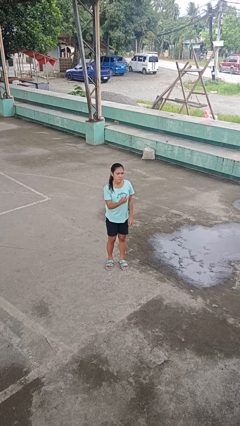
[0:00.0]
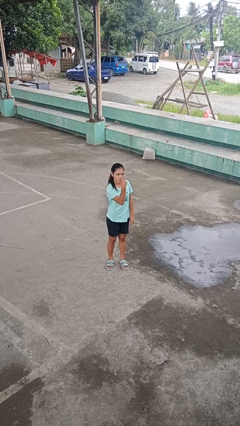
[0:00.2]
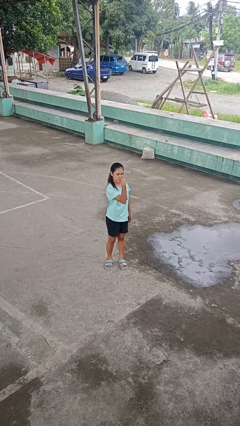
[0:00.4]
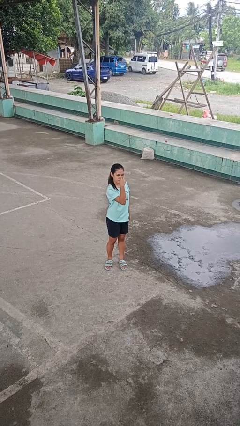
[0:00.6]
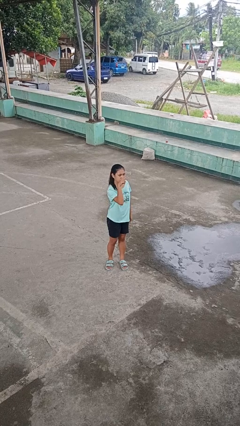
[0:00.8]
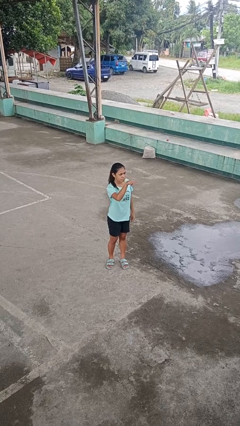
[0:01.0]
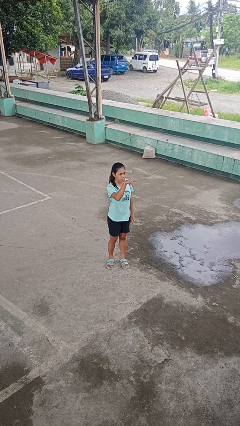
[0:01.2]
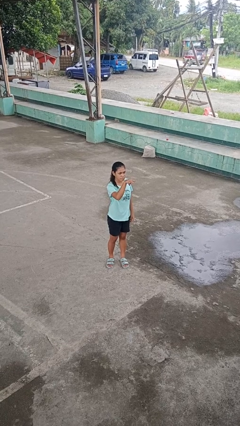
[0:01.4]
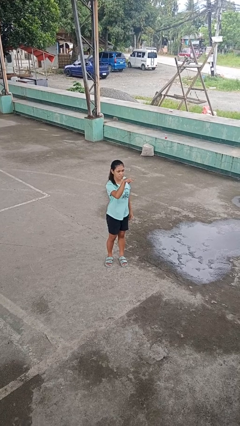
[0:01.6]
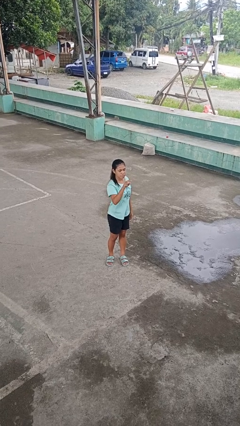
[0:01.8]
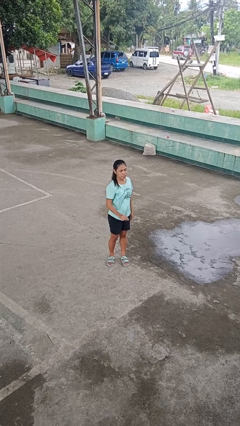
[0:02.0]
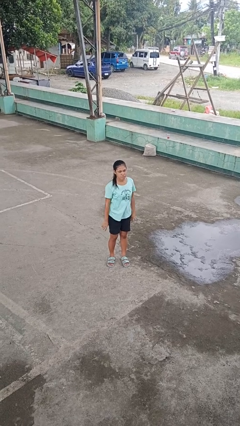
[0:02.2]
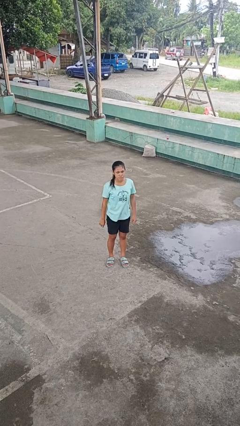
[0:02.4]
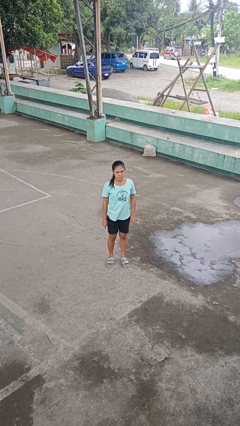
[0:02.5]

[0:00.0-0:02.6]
person gestures watch closely

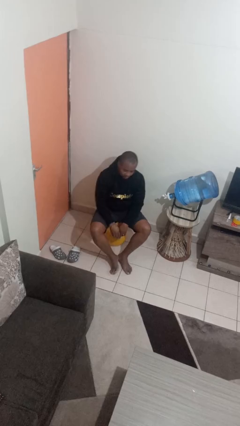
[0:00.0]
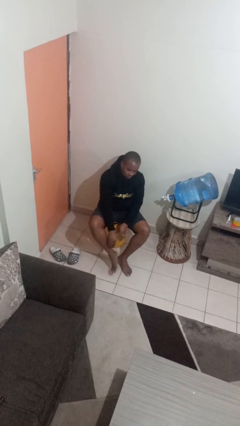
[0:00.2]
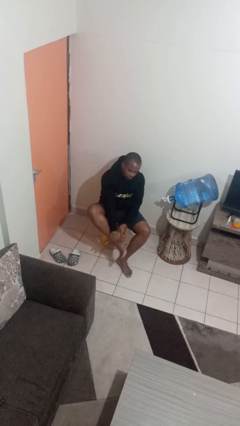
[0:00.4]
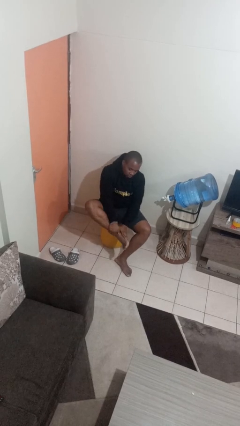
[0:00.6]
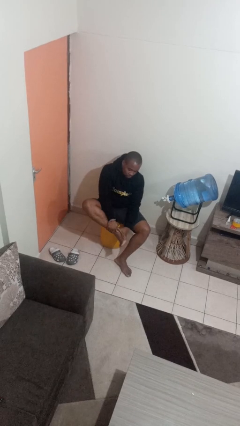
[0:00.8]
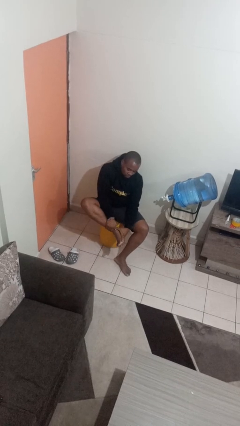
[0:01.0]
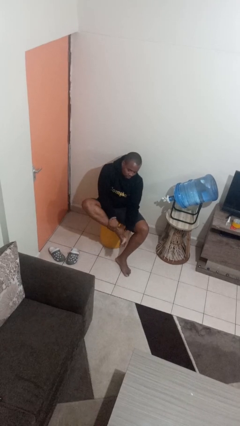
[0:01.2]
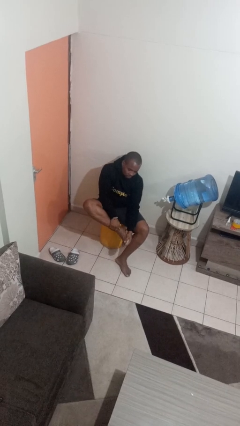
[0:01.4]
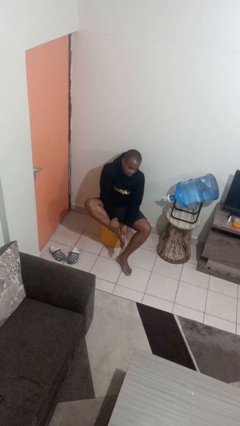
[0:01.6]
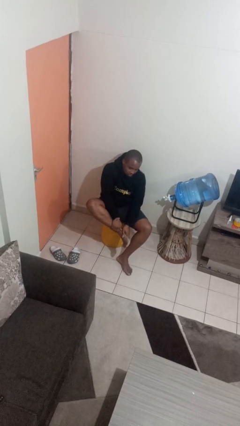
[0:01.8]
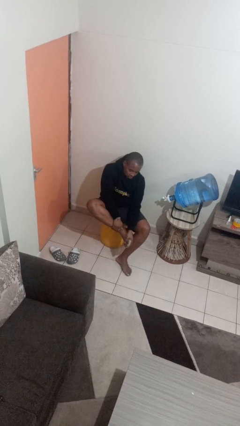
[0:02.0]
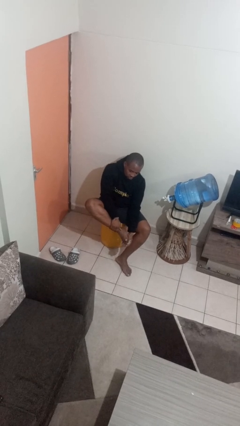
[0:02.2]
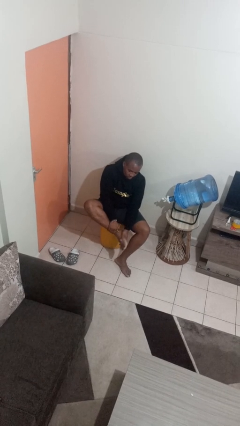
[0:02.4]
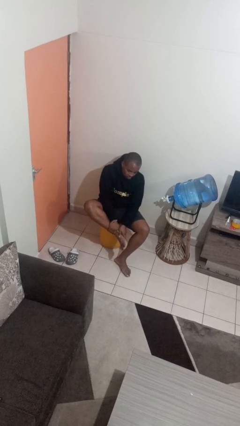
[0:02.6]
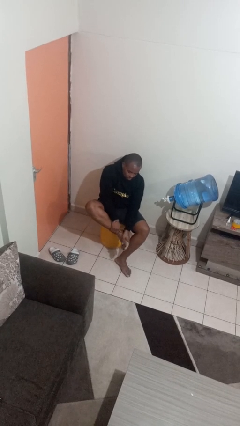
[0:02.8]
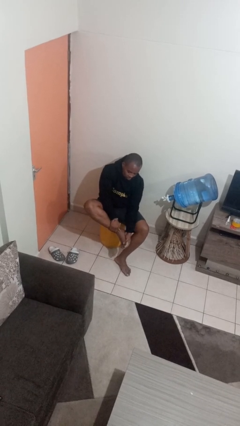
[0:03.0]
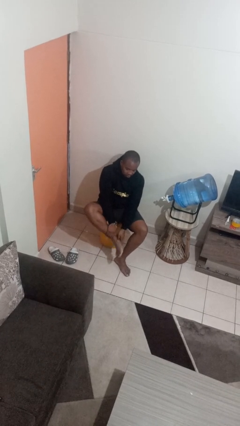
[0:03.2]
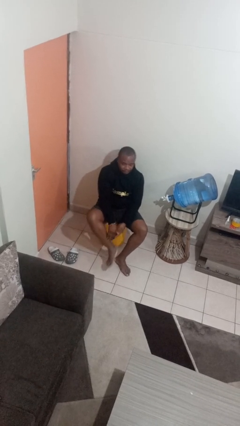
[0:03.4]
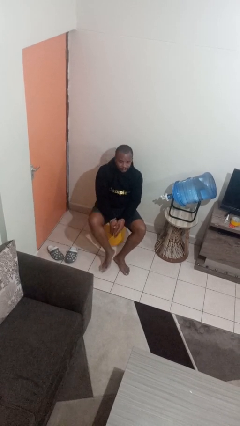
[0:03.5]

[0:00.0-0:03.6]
person rubs foot

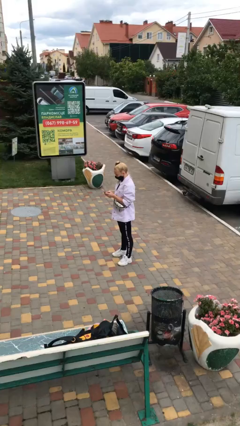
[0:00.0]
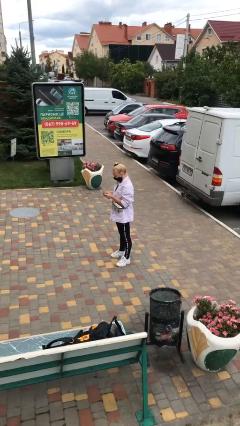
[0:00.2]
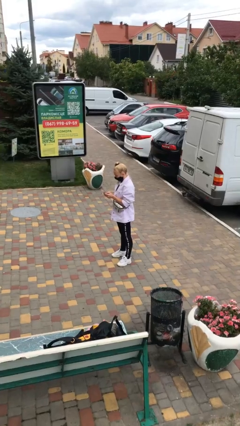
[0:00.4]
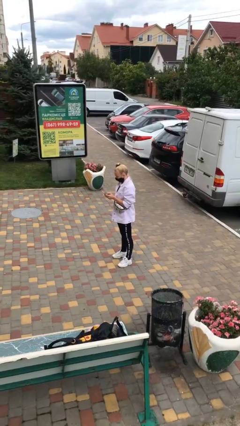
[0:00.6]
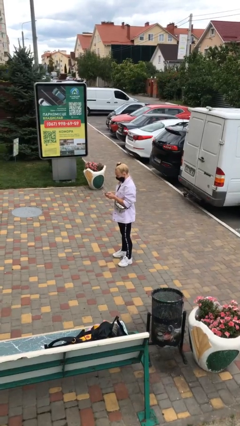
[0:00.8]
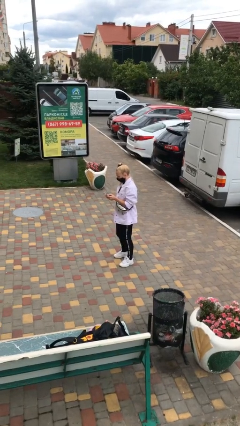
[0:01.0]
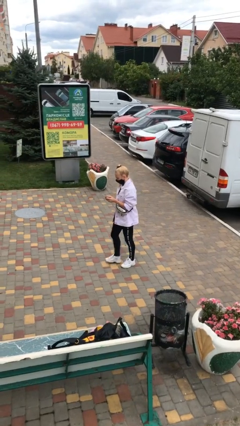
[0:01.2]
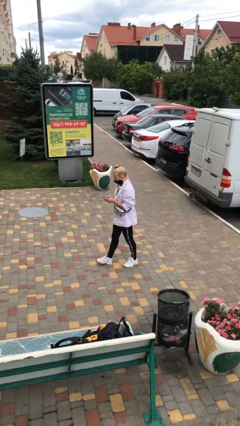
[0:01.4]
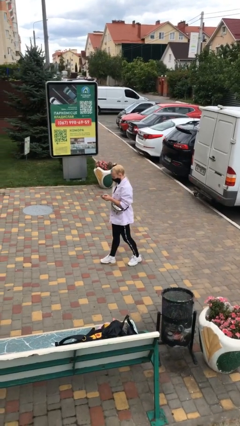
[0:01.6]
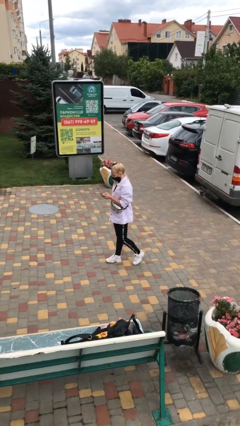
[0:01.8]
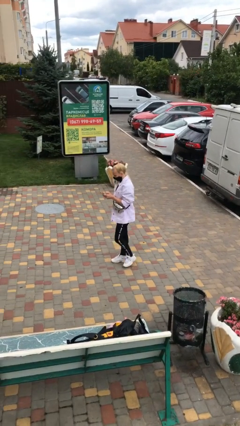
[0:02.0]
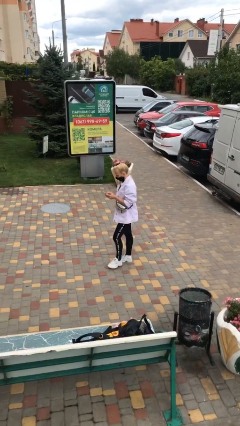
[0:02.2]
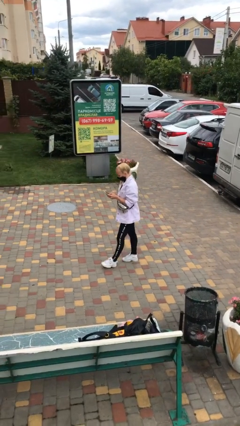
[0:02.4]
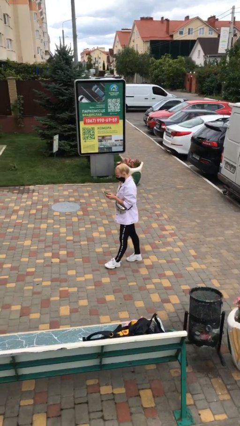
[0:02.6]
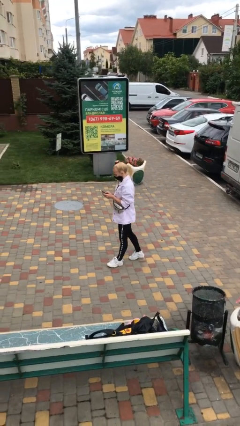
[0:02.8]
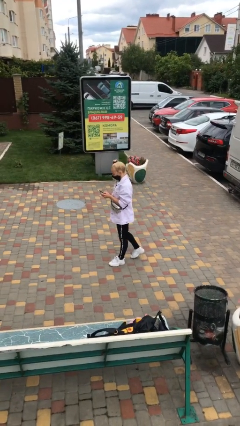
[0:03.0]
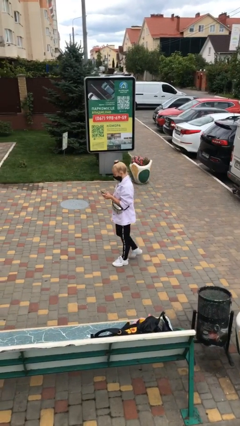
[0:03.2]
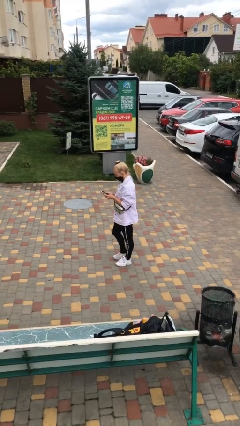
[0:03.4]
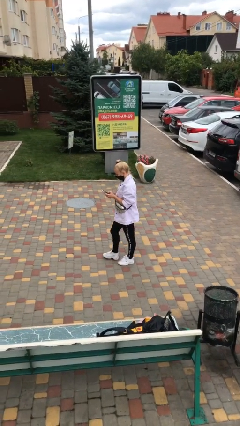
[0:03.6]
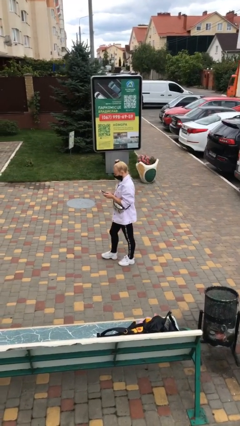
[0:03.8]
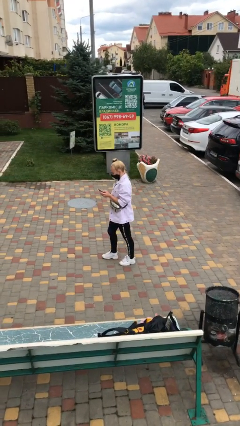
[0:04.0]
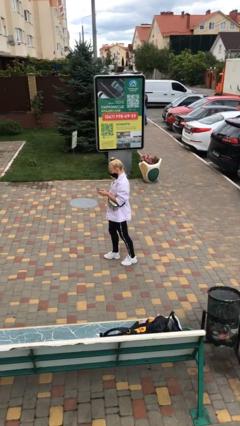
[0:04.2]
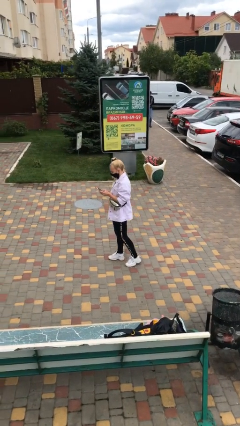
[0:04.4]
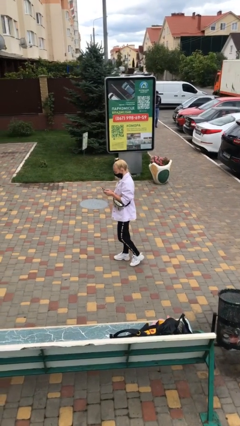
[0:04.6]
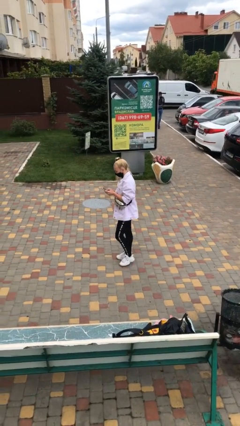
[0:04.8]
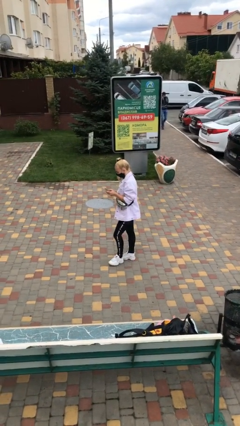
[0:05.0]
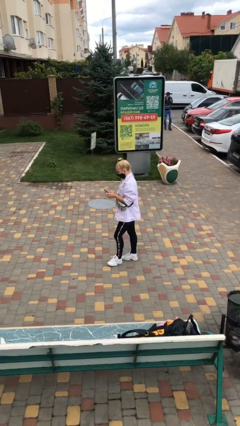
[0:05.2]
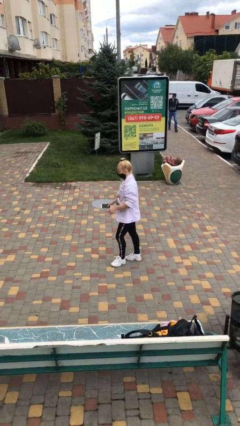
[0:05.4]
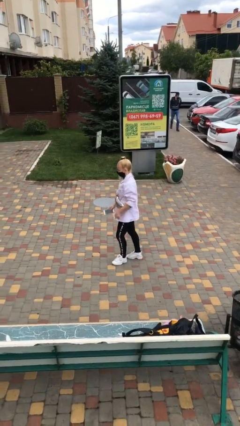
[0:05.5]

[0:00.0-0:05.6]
person texts on phone

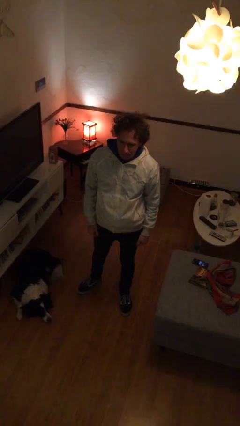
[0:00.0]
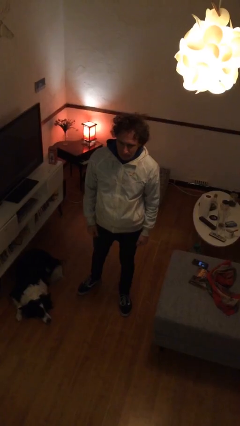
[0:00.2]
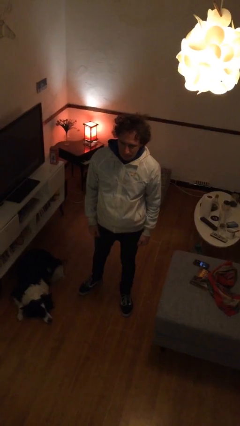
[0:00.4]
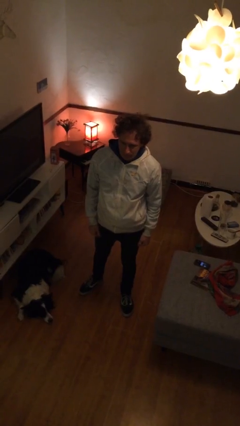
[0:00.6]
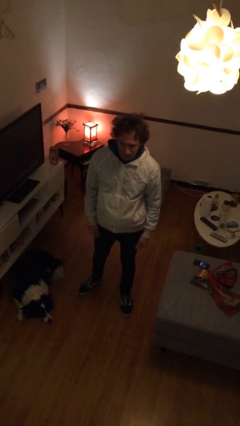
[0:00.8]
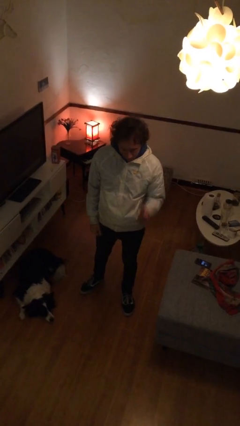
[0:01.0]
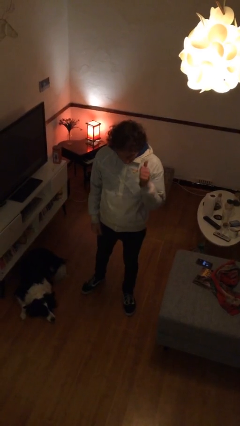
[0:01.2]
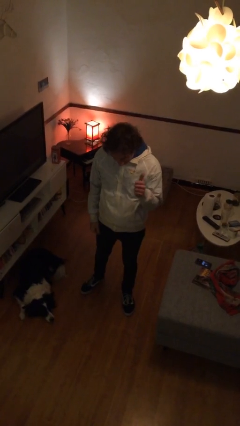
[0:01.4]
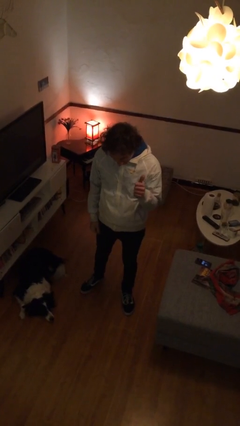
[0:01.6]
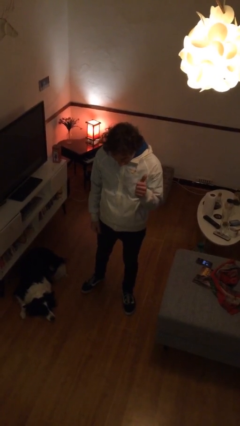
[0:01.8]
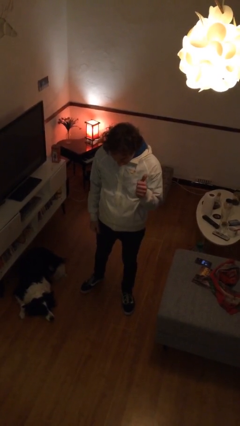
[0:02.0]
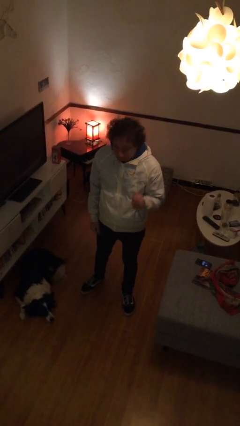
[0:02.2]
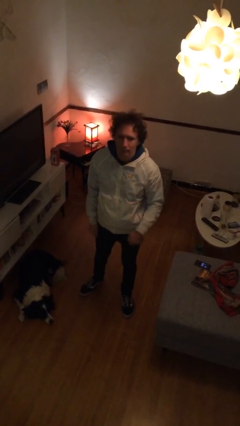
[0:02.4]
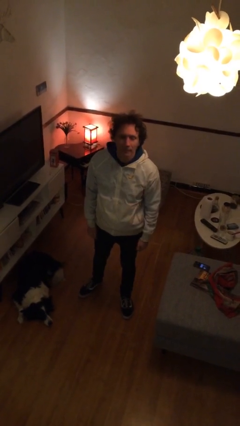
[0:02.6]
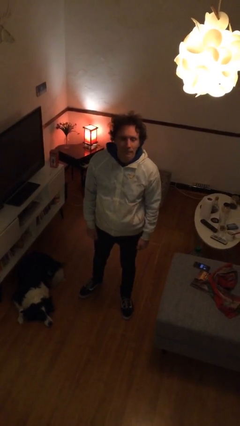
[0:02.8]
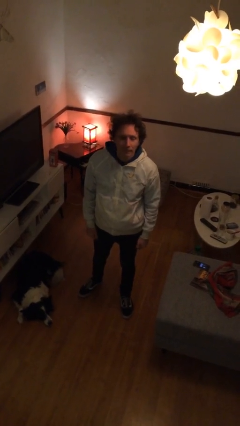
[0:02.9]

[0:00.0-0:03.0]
person gestures thumbs up

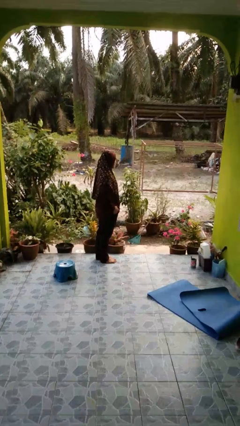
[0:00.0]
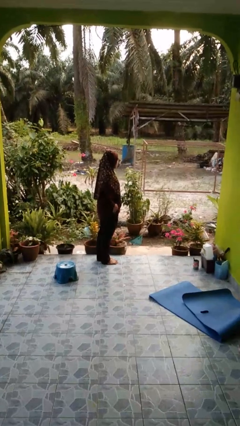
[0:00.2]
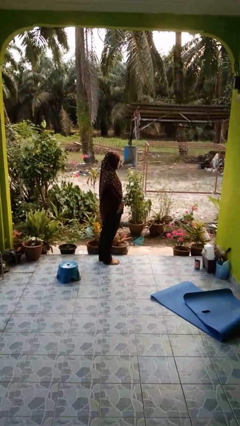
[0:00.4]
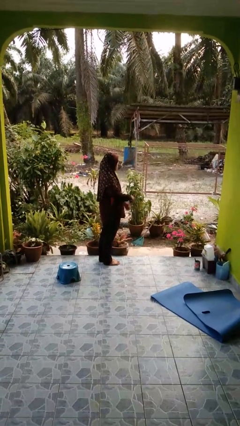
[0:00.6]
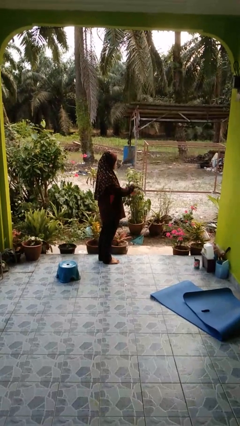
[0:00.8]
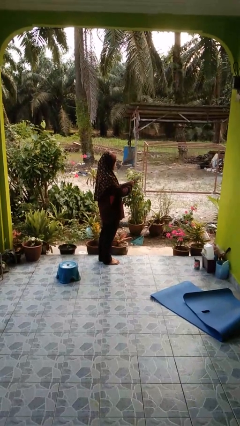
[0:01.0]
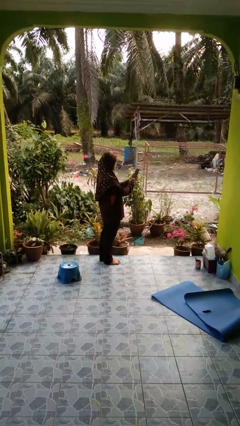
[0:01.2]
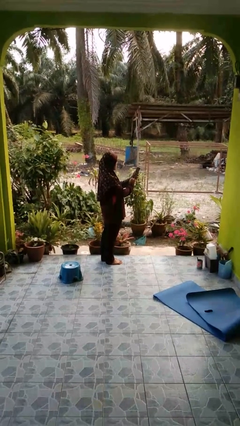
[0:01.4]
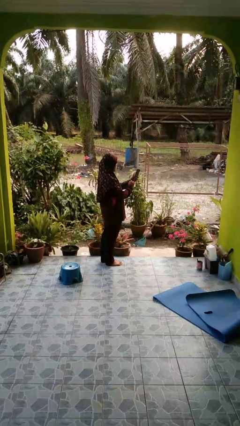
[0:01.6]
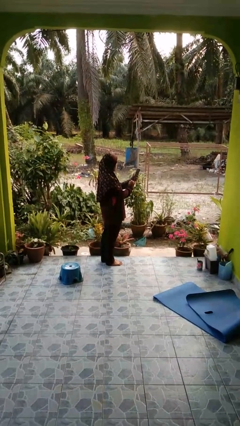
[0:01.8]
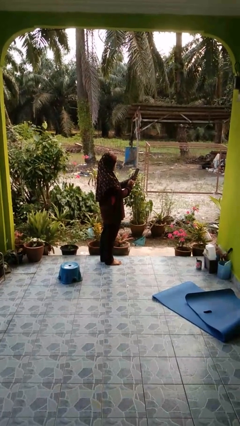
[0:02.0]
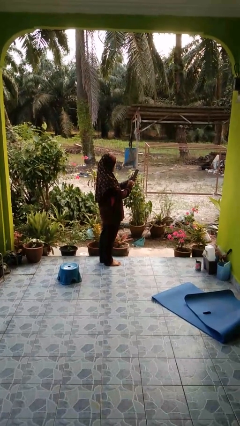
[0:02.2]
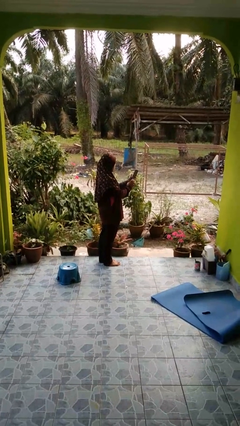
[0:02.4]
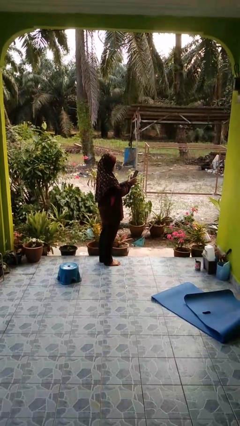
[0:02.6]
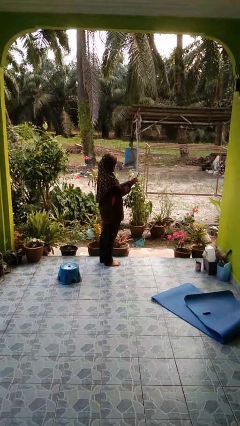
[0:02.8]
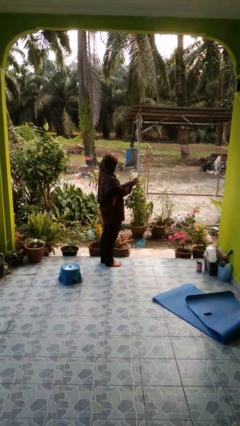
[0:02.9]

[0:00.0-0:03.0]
person takes phone from pocket

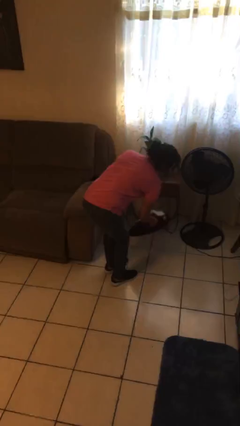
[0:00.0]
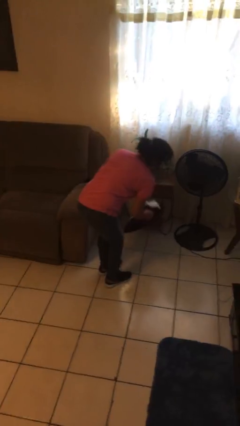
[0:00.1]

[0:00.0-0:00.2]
person picks up object from floor
